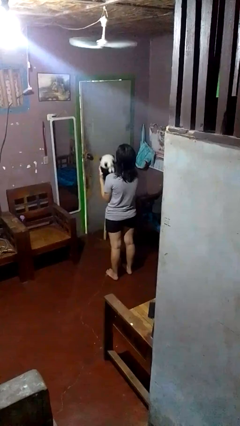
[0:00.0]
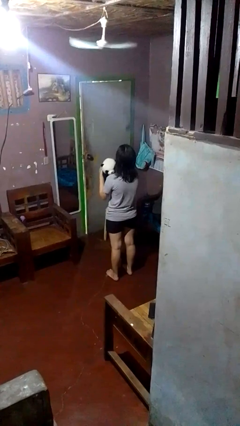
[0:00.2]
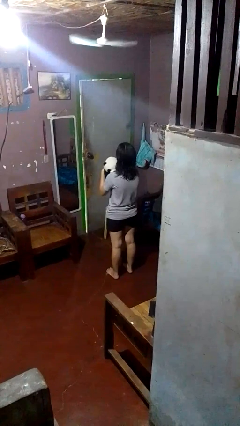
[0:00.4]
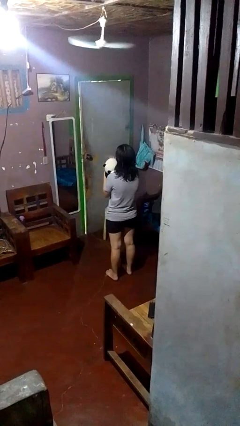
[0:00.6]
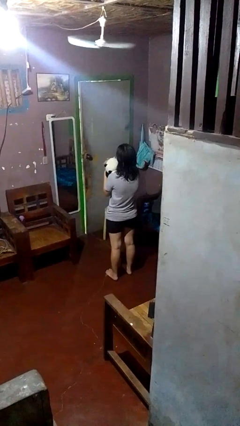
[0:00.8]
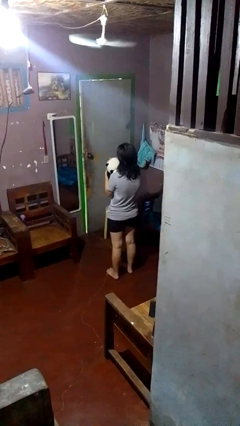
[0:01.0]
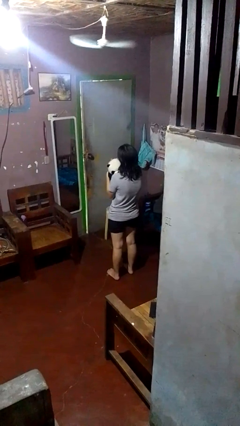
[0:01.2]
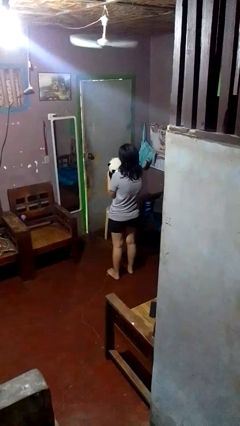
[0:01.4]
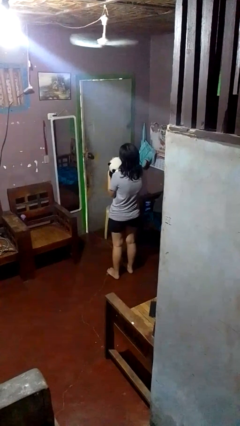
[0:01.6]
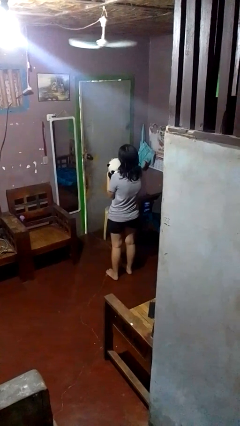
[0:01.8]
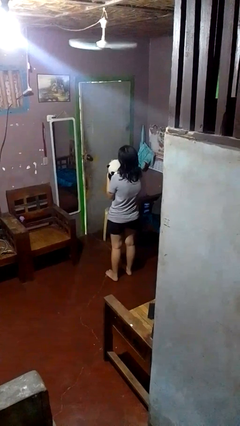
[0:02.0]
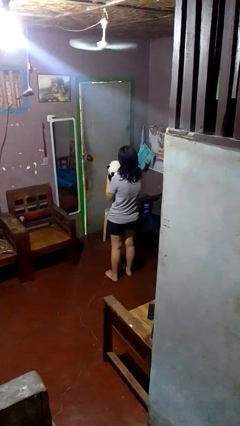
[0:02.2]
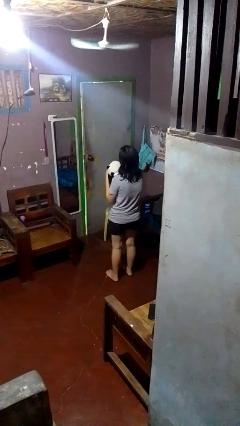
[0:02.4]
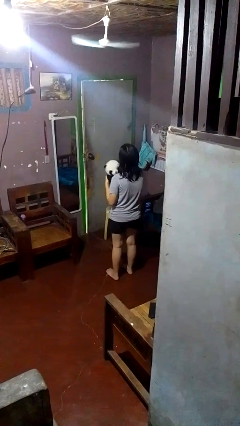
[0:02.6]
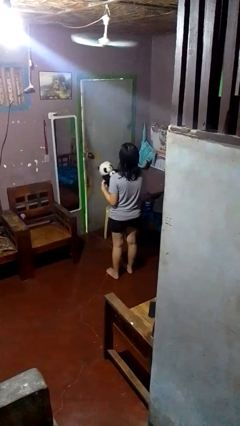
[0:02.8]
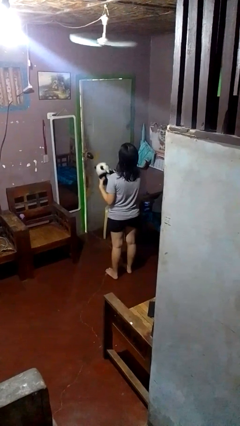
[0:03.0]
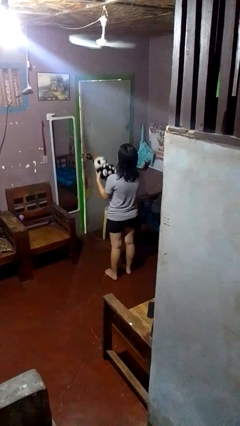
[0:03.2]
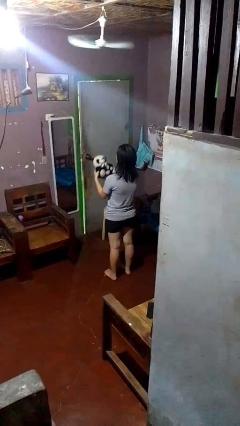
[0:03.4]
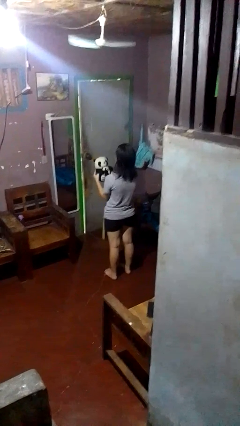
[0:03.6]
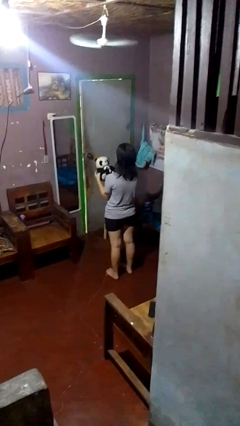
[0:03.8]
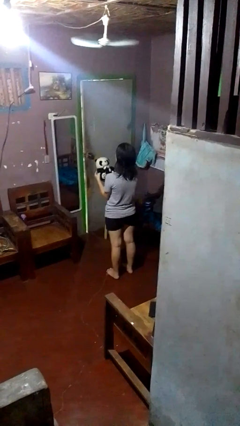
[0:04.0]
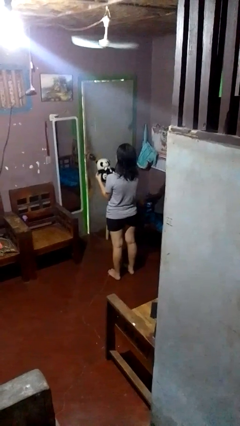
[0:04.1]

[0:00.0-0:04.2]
person hugs stuffed animal

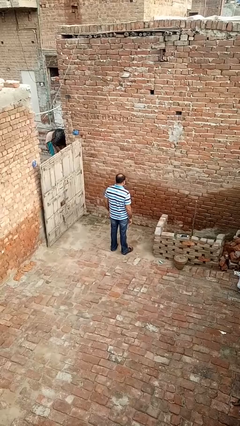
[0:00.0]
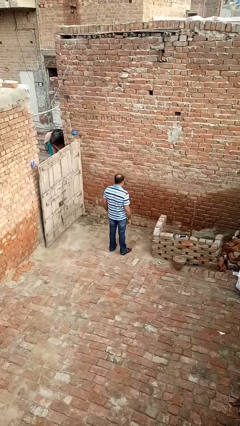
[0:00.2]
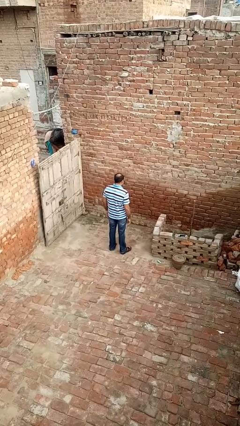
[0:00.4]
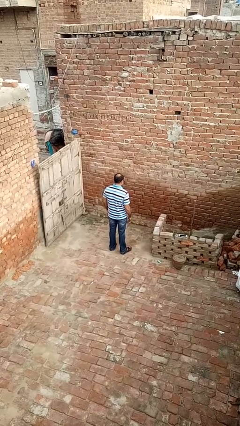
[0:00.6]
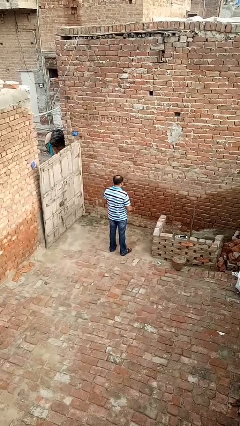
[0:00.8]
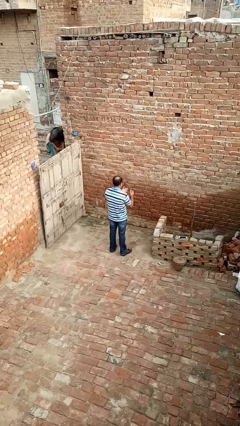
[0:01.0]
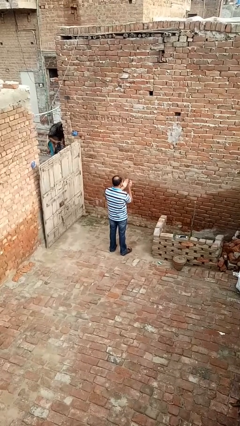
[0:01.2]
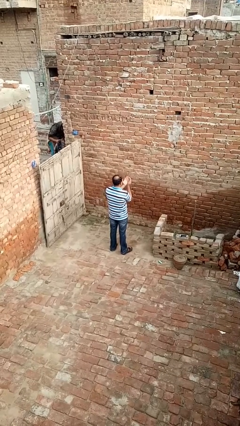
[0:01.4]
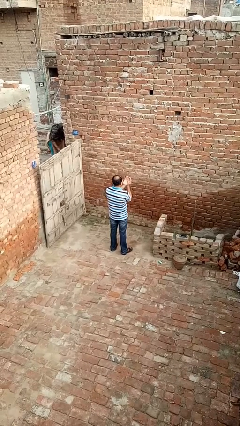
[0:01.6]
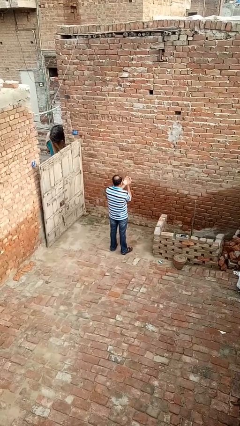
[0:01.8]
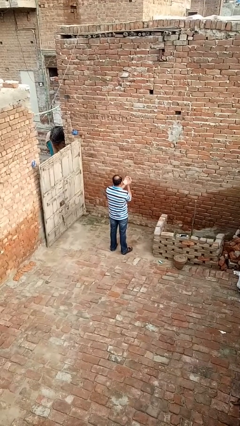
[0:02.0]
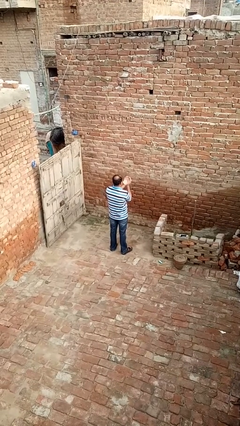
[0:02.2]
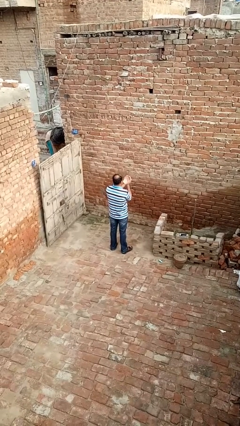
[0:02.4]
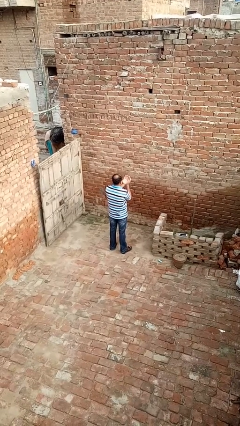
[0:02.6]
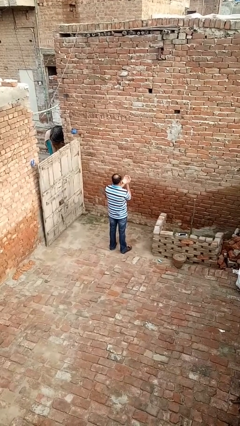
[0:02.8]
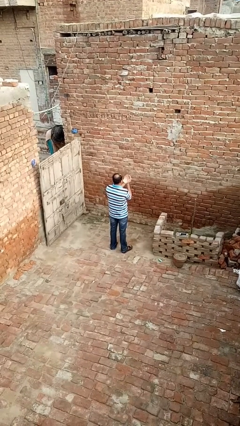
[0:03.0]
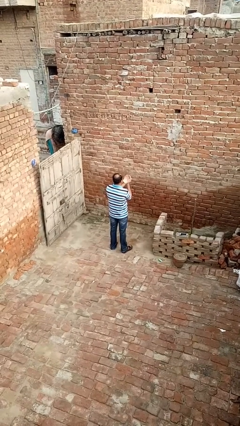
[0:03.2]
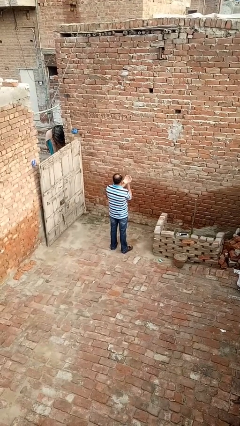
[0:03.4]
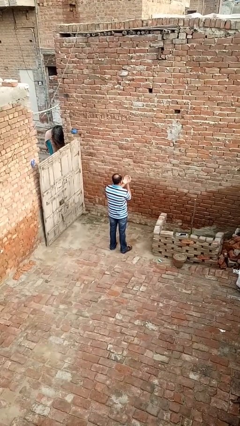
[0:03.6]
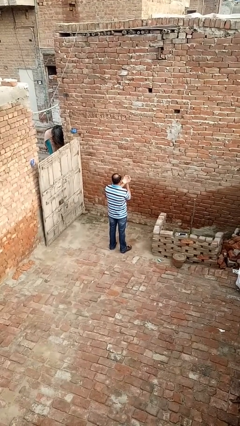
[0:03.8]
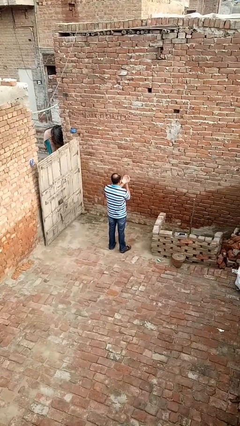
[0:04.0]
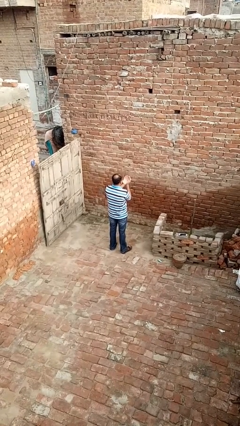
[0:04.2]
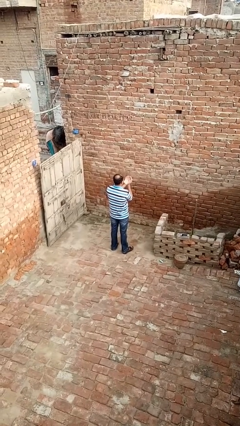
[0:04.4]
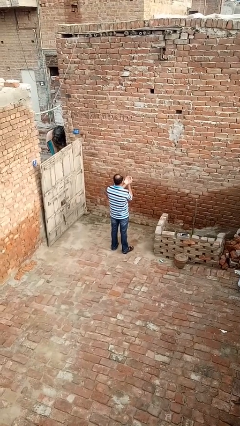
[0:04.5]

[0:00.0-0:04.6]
person prays

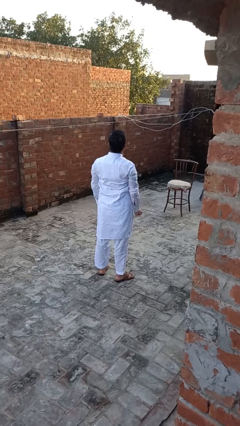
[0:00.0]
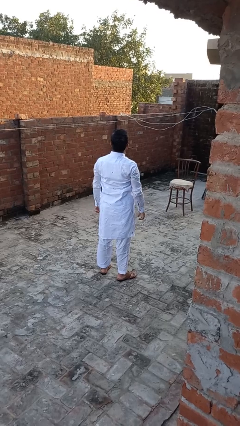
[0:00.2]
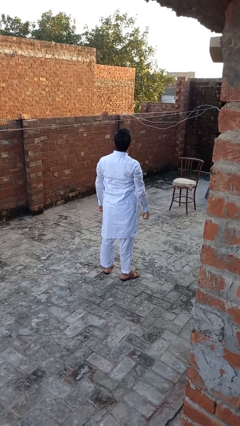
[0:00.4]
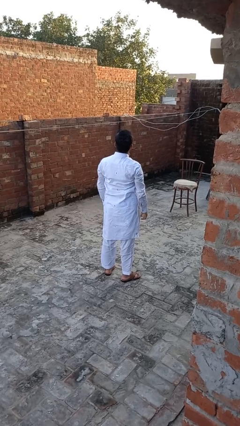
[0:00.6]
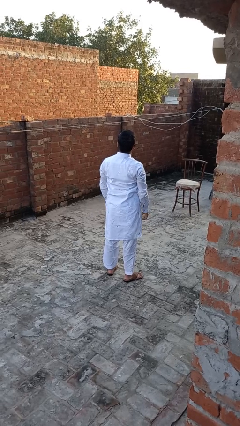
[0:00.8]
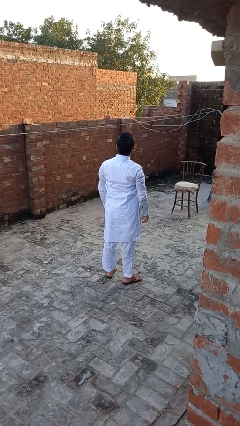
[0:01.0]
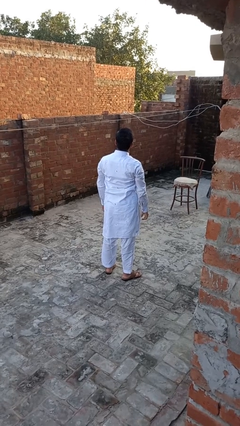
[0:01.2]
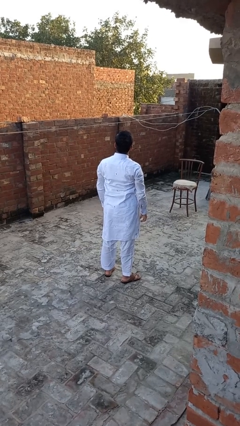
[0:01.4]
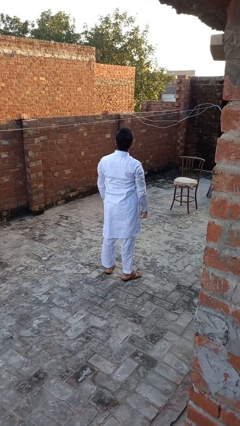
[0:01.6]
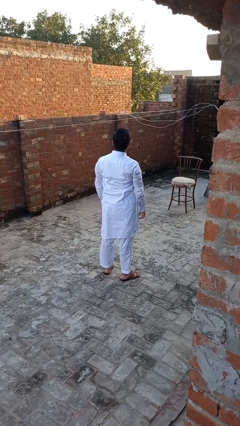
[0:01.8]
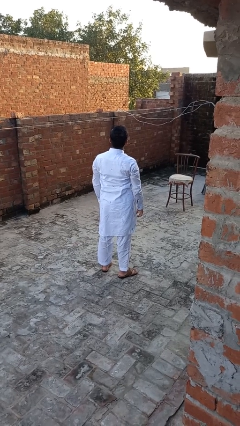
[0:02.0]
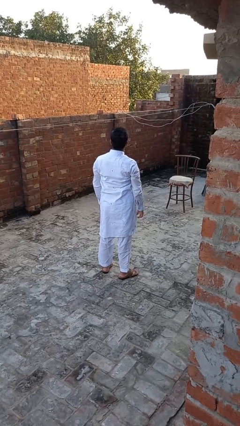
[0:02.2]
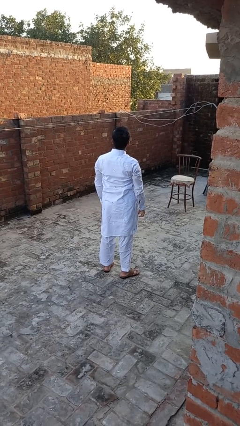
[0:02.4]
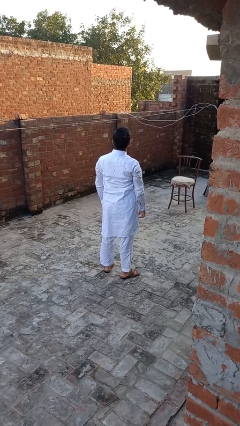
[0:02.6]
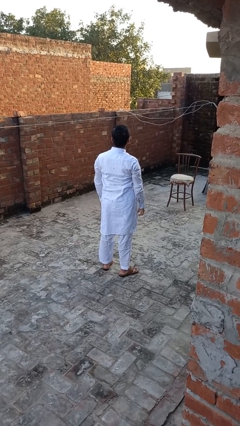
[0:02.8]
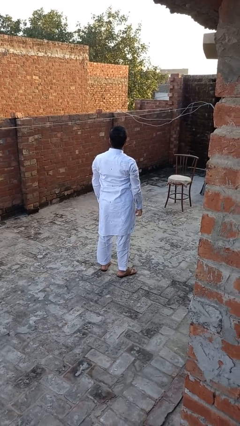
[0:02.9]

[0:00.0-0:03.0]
person gestures swipe down

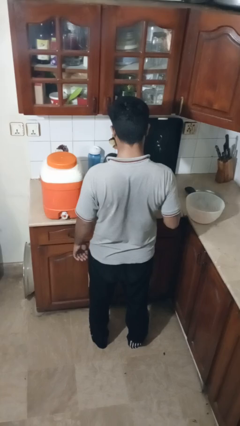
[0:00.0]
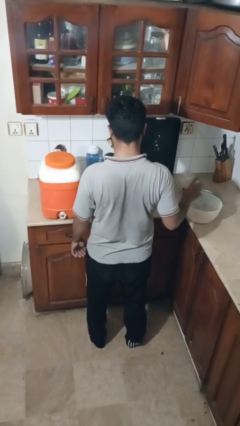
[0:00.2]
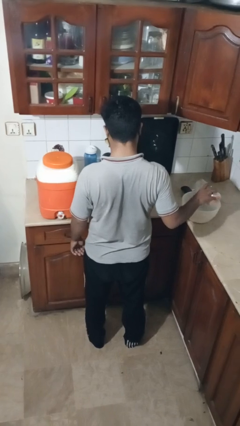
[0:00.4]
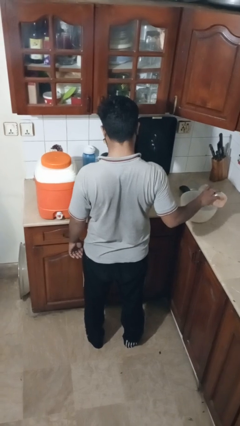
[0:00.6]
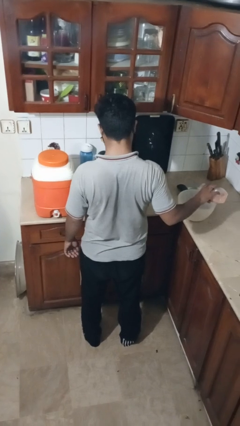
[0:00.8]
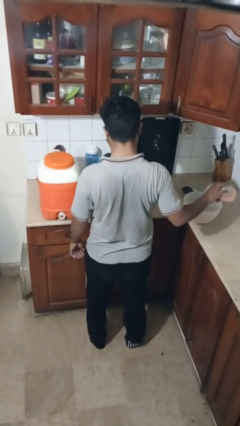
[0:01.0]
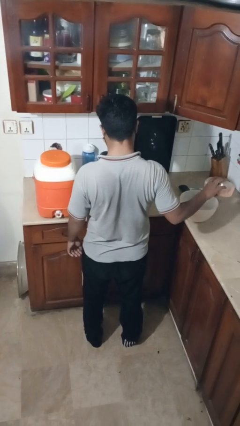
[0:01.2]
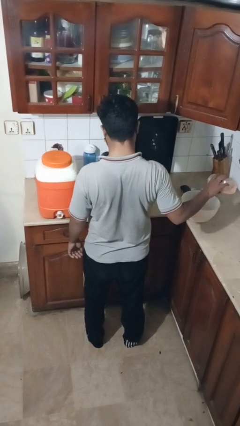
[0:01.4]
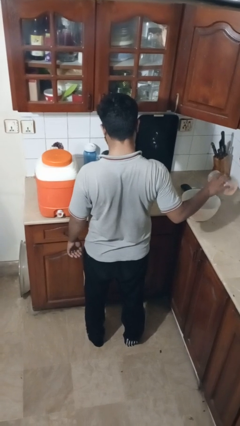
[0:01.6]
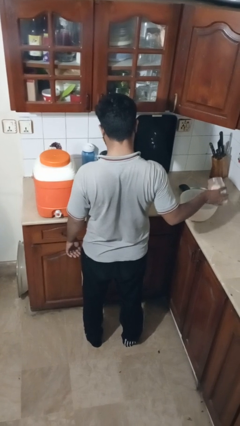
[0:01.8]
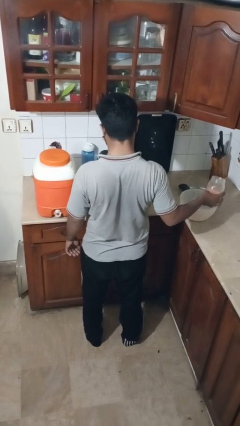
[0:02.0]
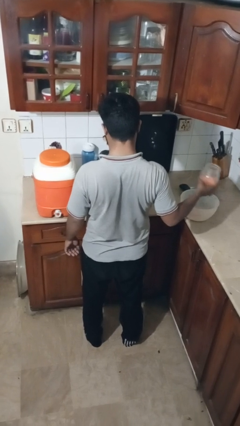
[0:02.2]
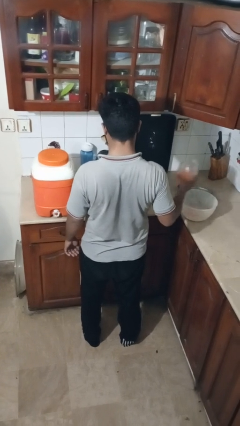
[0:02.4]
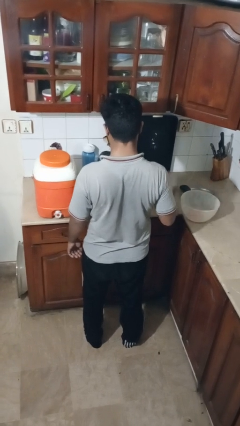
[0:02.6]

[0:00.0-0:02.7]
person pours into bowl

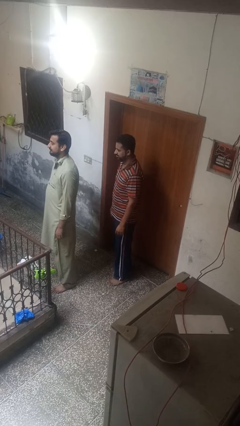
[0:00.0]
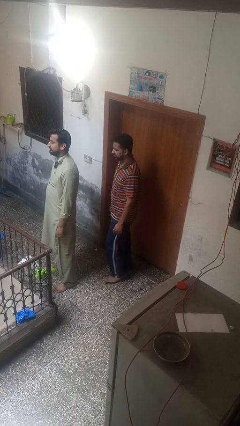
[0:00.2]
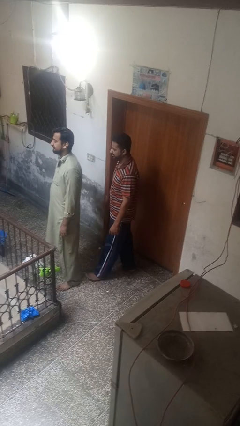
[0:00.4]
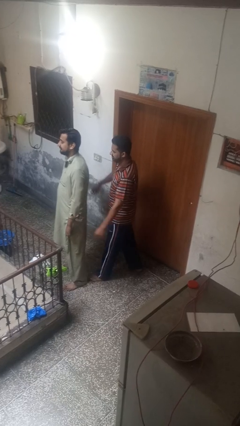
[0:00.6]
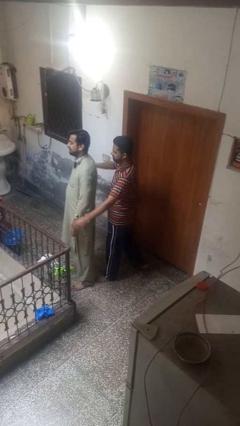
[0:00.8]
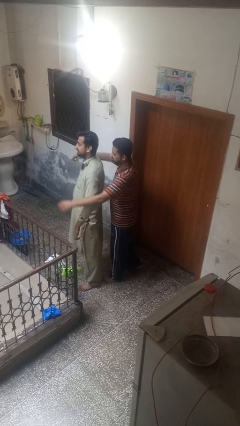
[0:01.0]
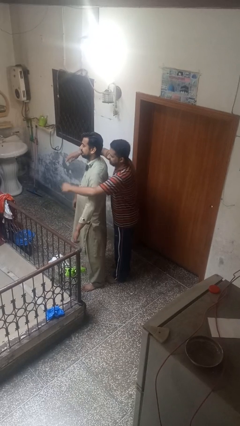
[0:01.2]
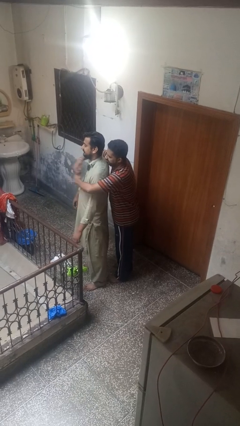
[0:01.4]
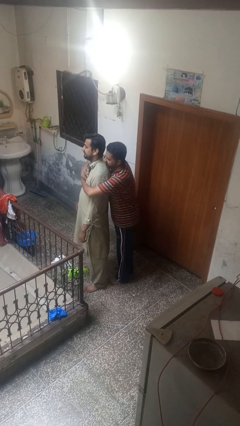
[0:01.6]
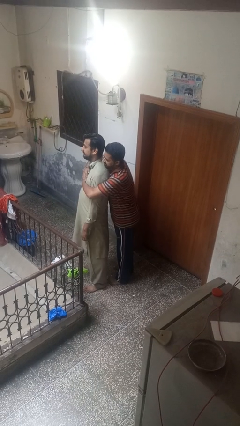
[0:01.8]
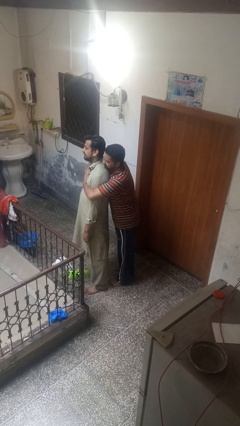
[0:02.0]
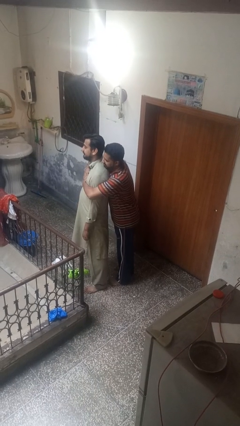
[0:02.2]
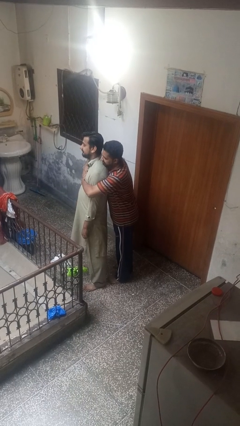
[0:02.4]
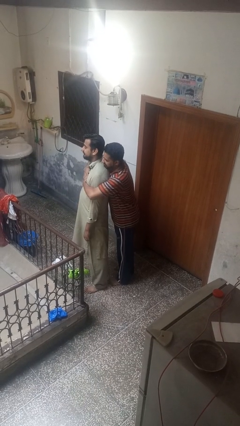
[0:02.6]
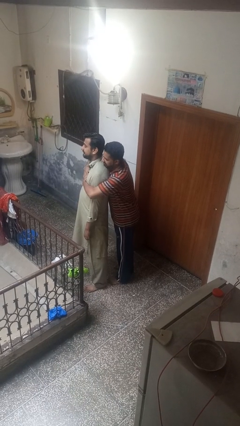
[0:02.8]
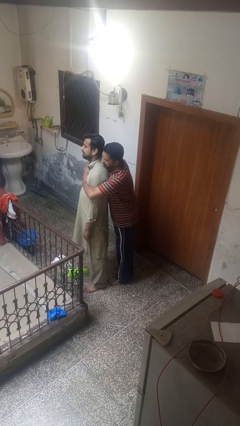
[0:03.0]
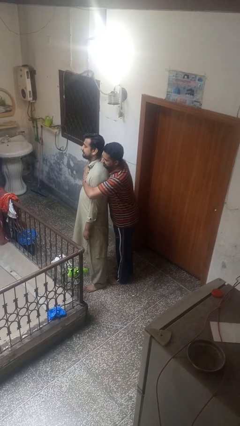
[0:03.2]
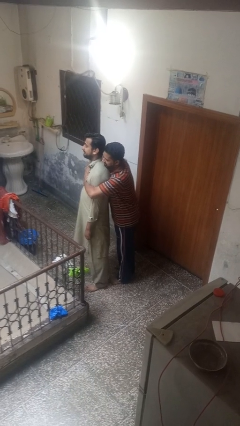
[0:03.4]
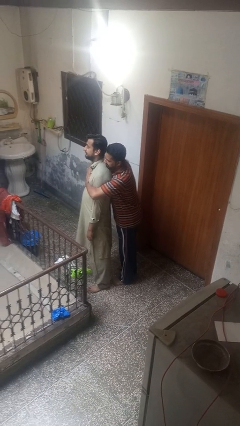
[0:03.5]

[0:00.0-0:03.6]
person hugs person from behind
